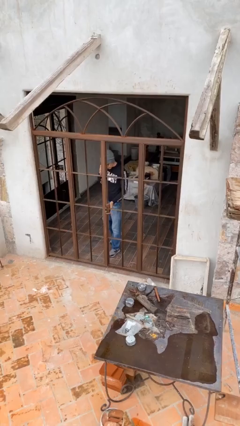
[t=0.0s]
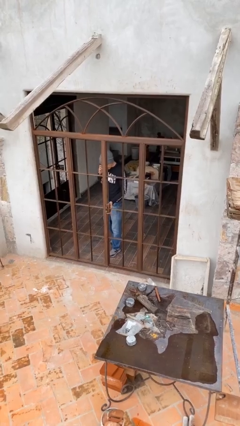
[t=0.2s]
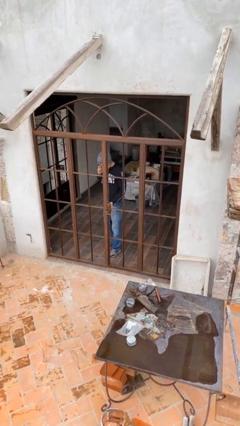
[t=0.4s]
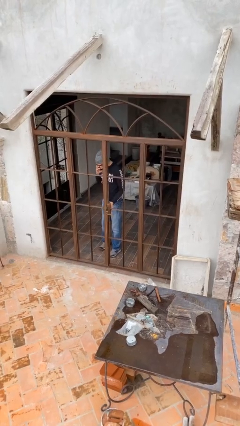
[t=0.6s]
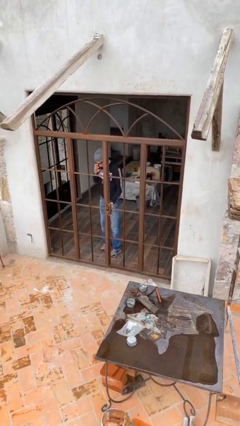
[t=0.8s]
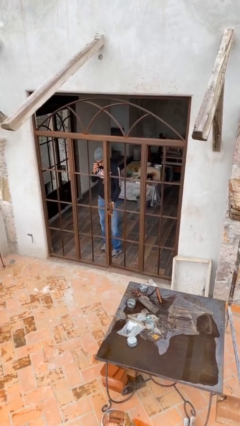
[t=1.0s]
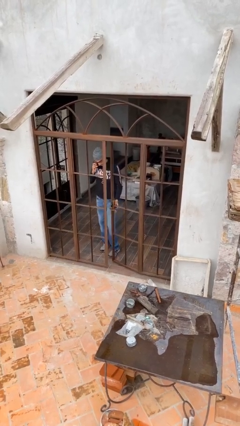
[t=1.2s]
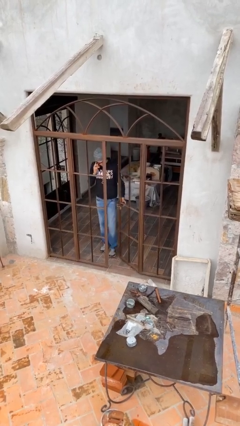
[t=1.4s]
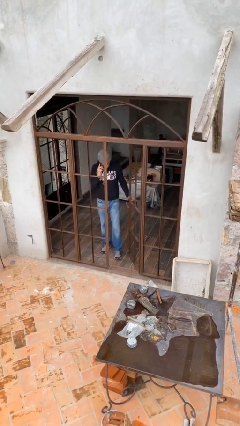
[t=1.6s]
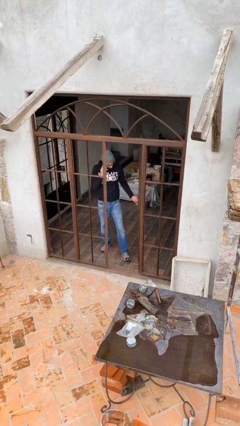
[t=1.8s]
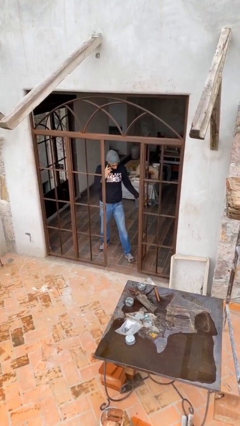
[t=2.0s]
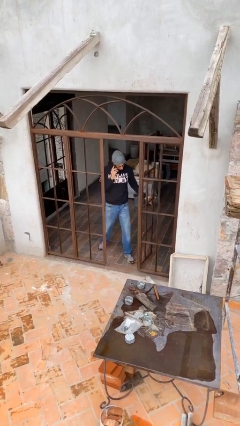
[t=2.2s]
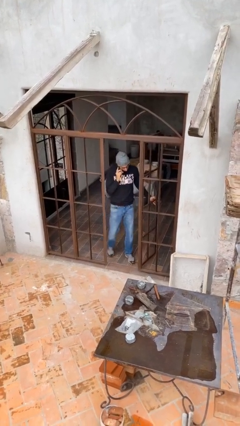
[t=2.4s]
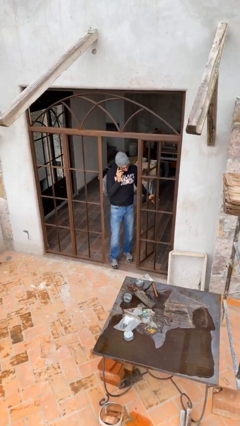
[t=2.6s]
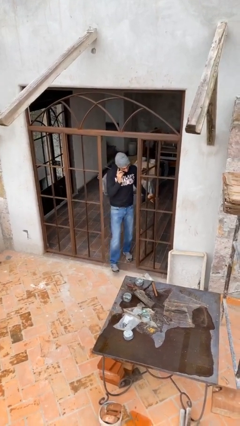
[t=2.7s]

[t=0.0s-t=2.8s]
person opens facility door

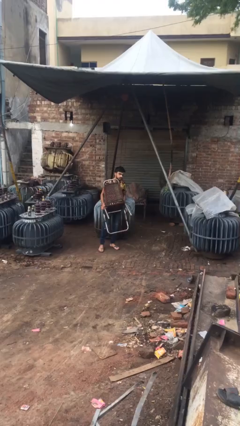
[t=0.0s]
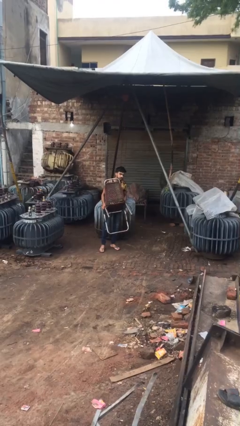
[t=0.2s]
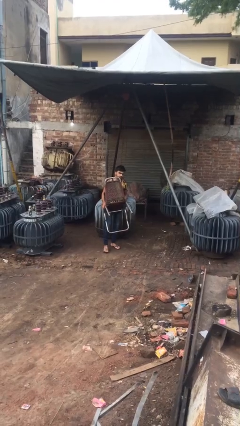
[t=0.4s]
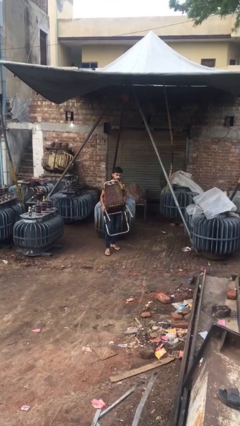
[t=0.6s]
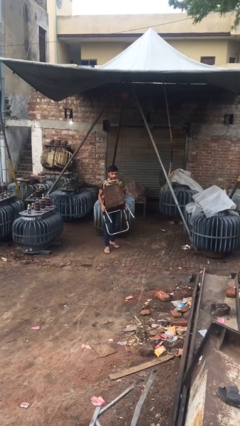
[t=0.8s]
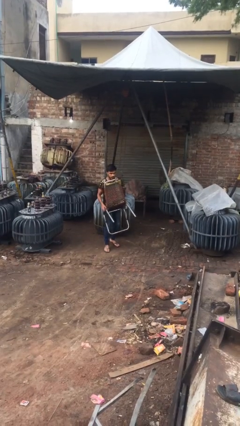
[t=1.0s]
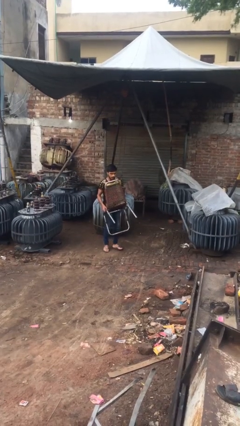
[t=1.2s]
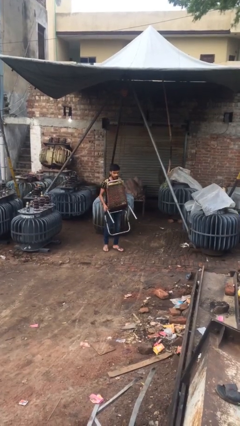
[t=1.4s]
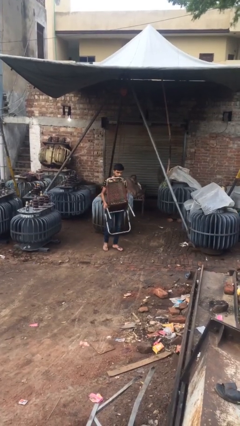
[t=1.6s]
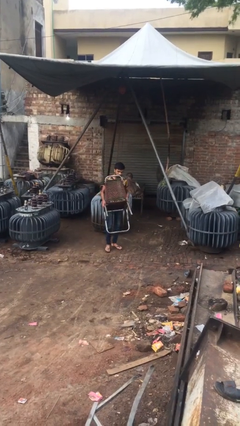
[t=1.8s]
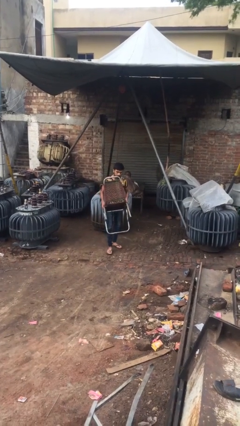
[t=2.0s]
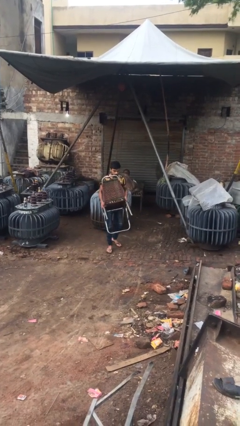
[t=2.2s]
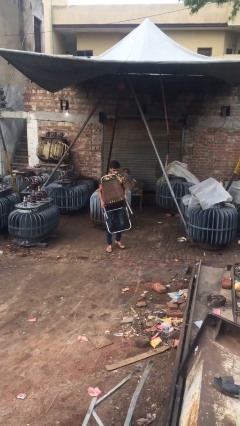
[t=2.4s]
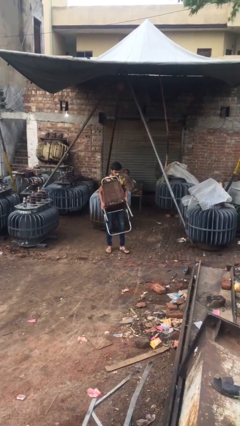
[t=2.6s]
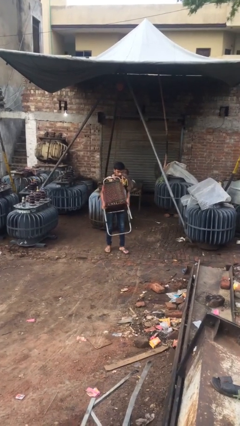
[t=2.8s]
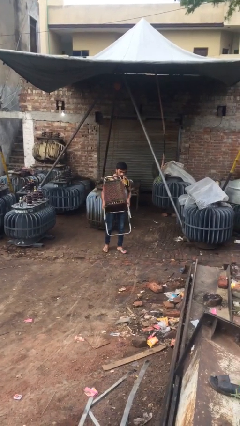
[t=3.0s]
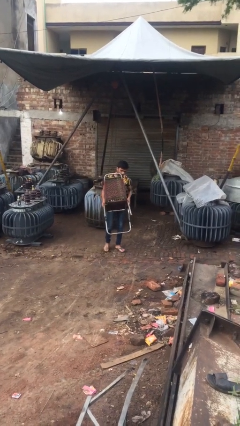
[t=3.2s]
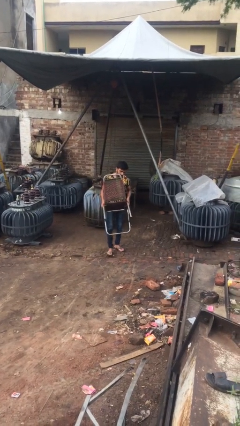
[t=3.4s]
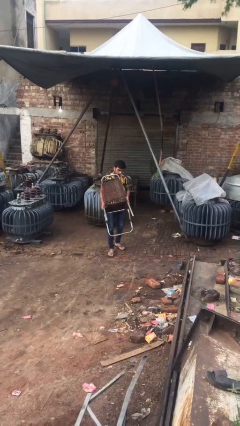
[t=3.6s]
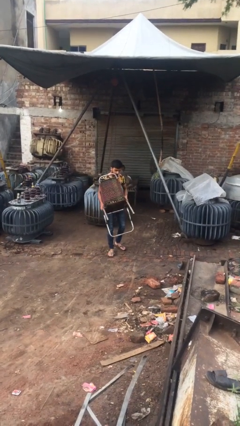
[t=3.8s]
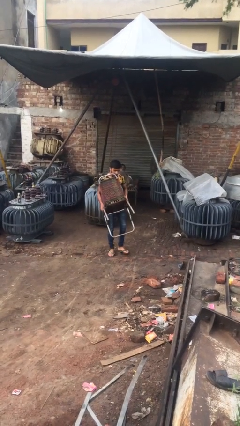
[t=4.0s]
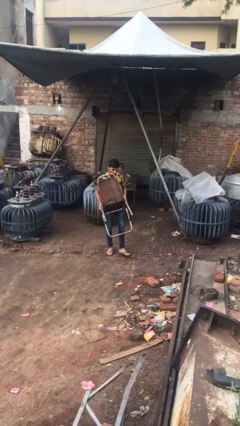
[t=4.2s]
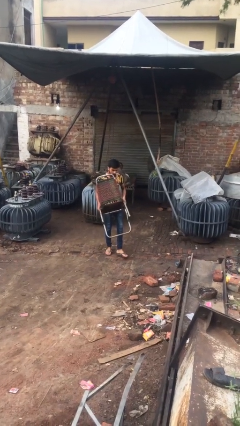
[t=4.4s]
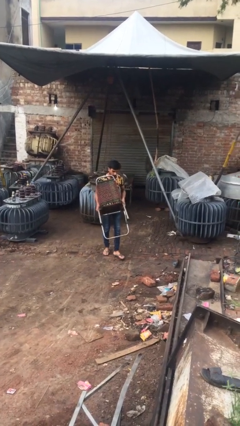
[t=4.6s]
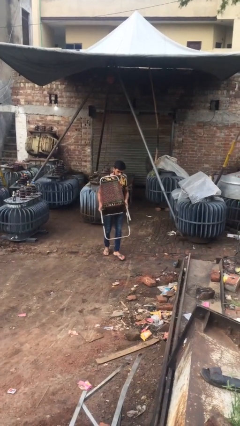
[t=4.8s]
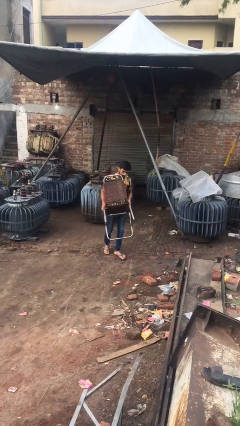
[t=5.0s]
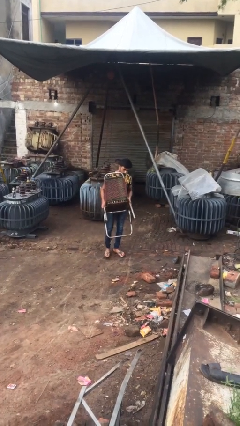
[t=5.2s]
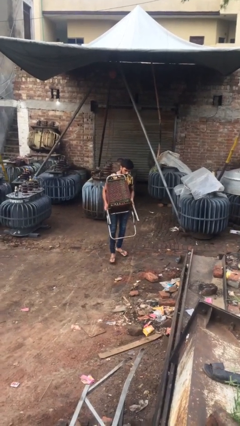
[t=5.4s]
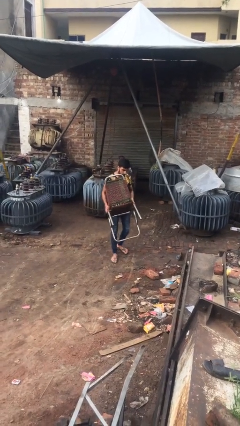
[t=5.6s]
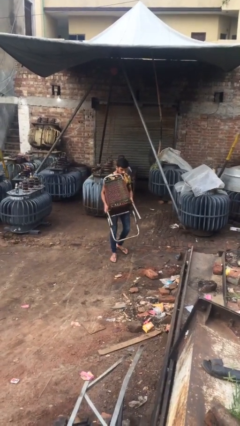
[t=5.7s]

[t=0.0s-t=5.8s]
person carries heavy object

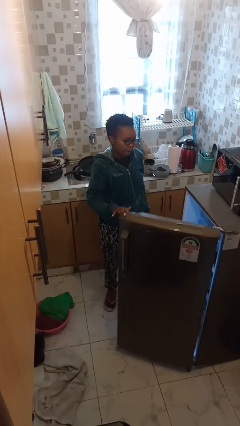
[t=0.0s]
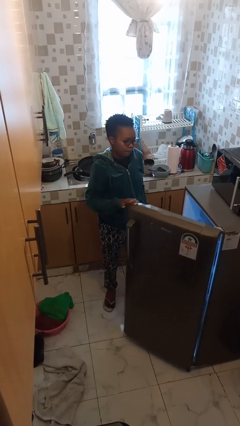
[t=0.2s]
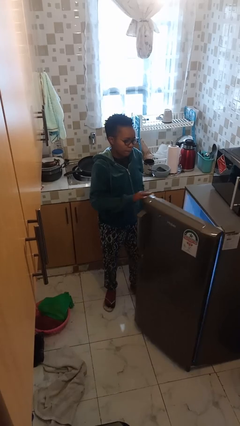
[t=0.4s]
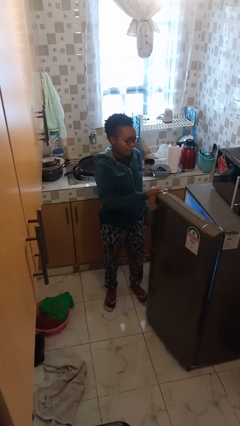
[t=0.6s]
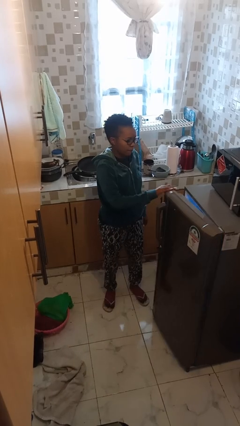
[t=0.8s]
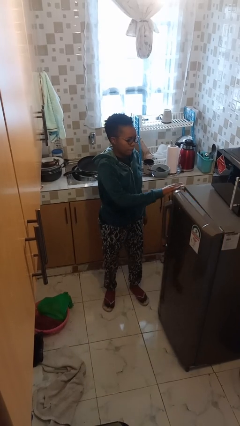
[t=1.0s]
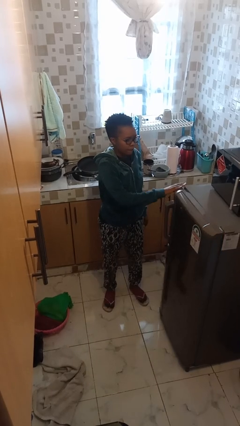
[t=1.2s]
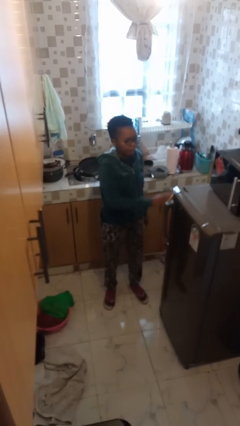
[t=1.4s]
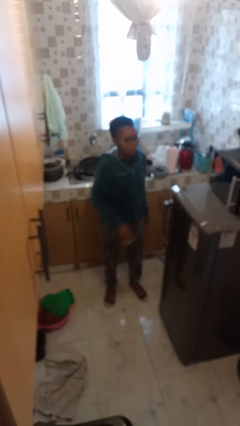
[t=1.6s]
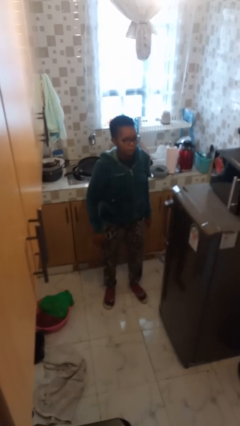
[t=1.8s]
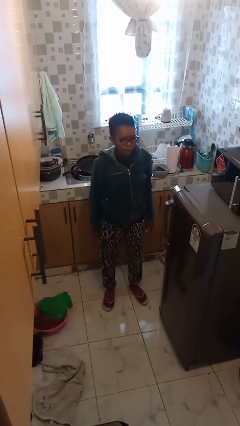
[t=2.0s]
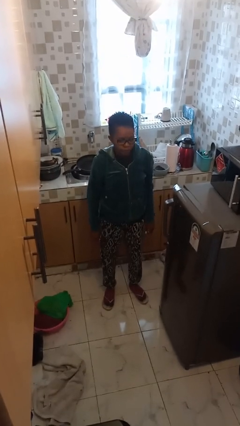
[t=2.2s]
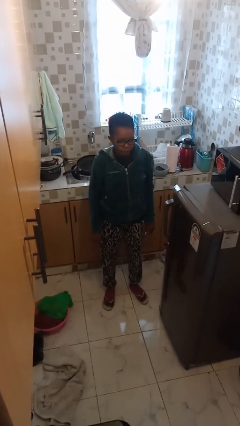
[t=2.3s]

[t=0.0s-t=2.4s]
person closes refrigerator

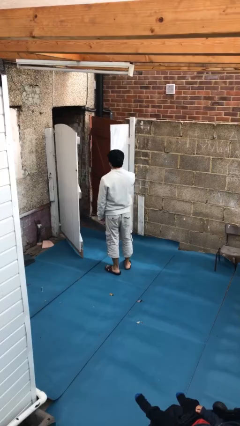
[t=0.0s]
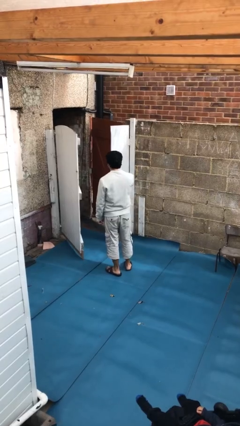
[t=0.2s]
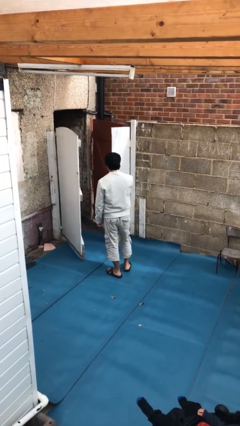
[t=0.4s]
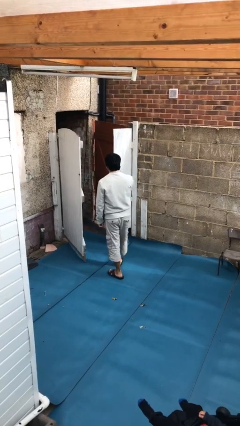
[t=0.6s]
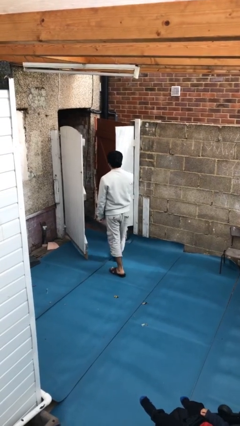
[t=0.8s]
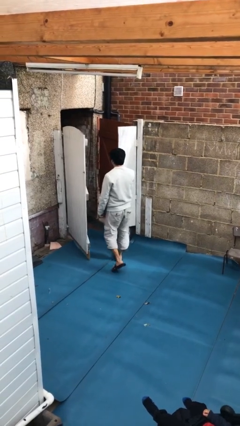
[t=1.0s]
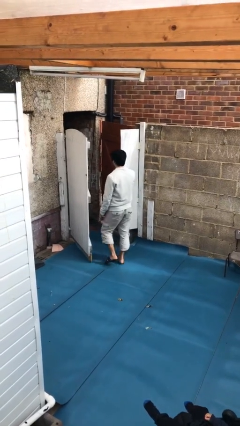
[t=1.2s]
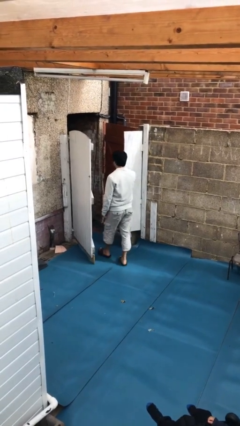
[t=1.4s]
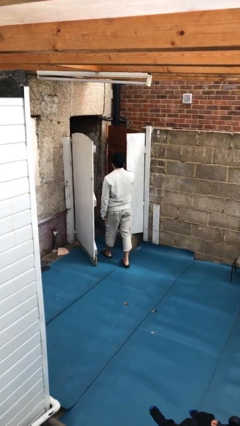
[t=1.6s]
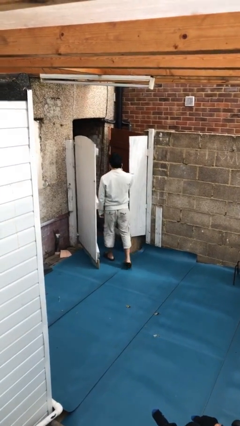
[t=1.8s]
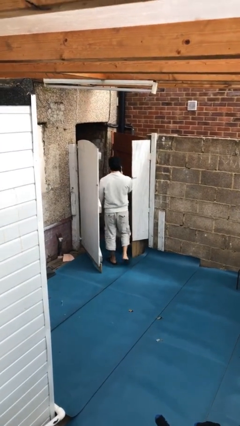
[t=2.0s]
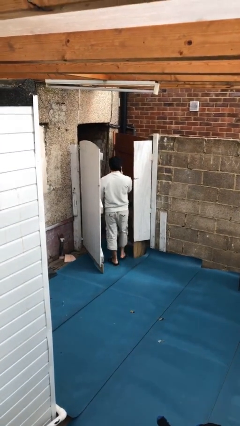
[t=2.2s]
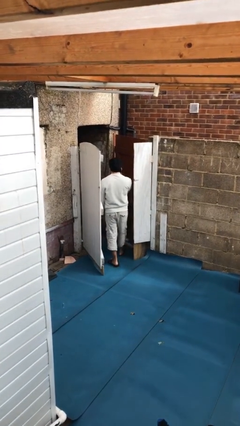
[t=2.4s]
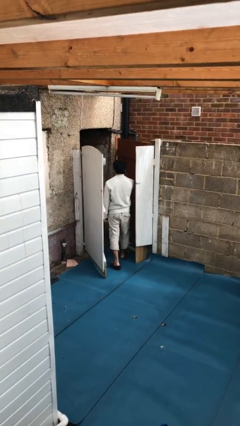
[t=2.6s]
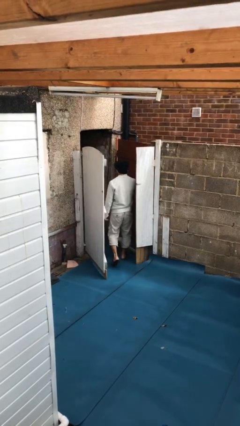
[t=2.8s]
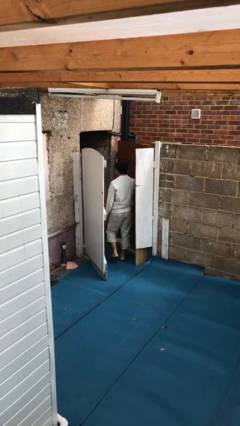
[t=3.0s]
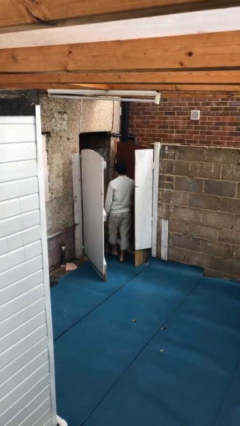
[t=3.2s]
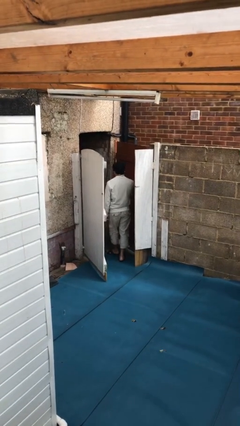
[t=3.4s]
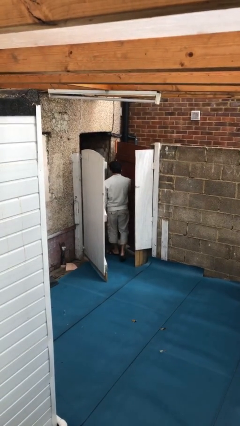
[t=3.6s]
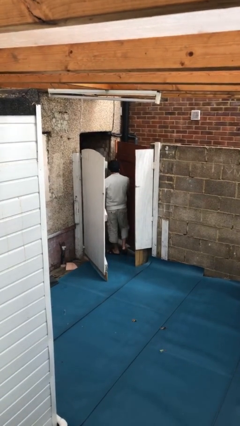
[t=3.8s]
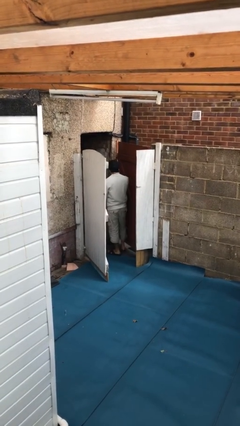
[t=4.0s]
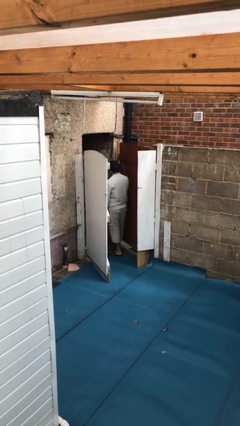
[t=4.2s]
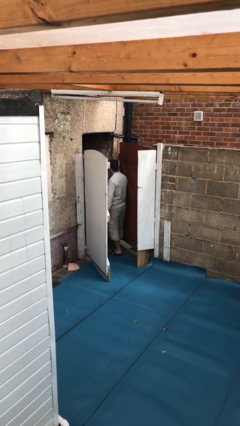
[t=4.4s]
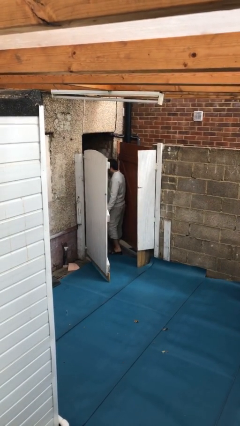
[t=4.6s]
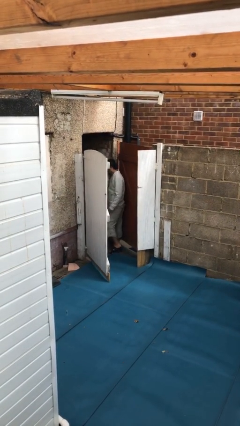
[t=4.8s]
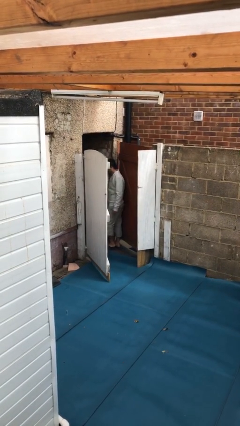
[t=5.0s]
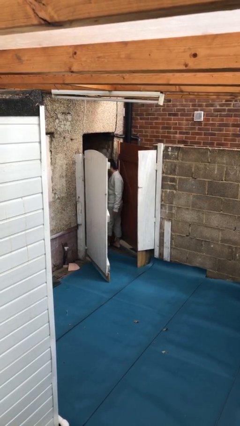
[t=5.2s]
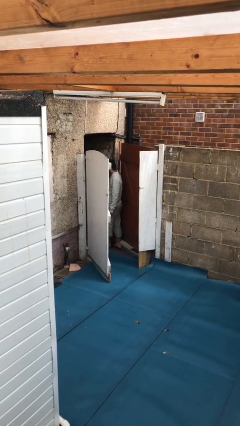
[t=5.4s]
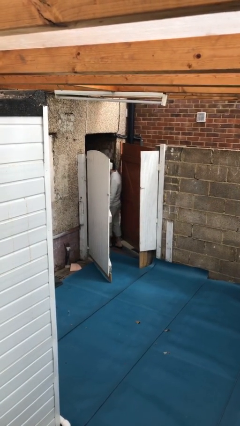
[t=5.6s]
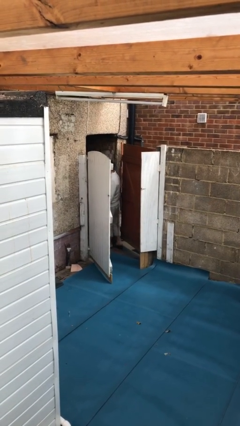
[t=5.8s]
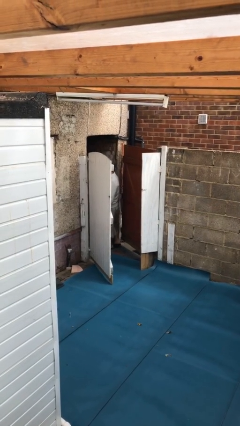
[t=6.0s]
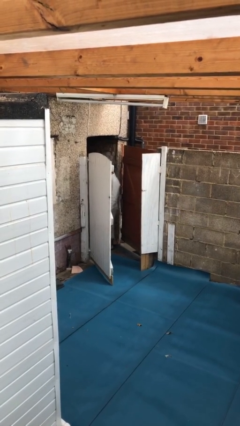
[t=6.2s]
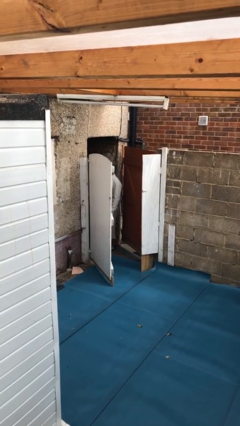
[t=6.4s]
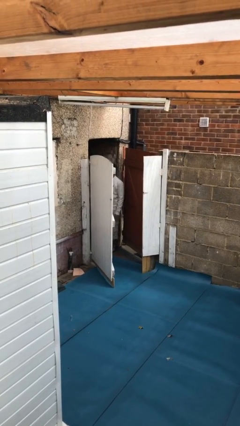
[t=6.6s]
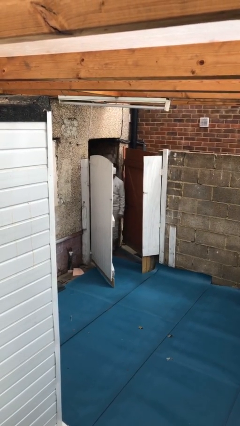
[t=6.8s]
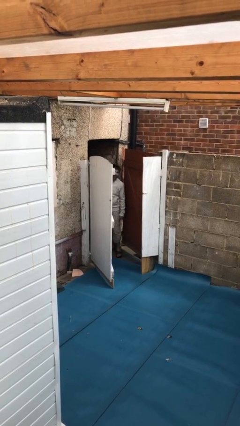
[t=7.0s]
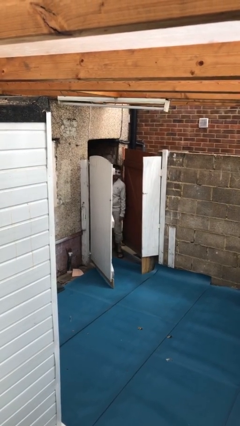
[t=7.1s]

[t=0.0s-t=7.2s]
person exits scene through structure
